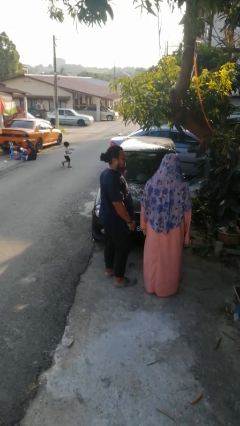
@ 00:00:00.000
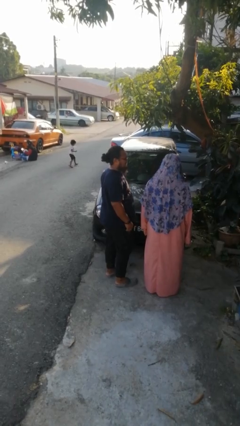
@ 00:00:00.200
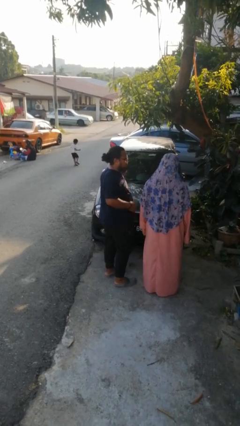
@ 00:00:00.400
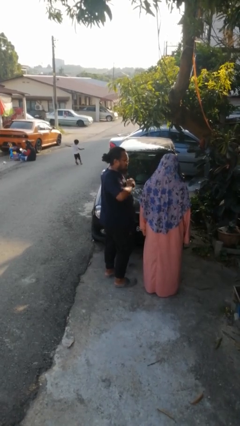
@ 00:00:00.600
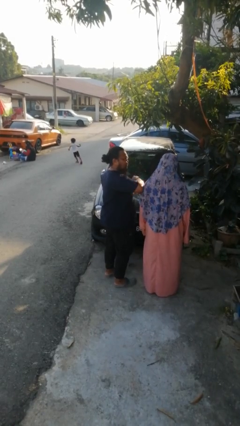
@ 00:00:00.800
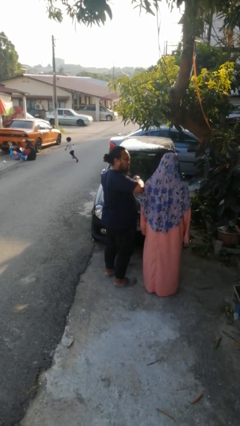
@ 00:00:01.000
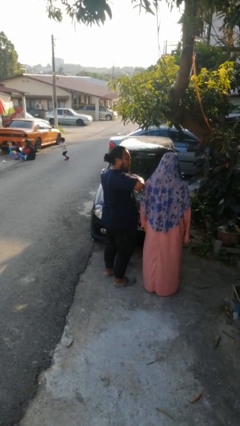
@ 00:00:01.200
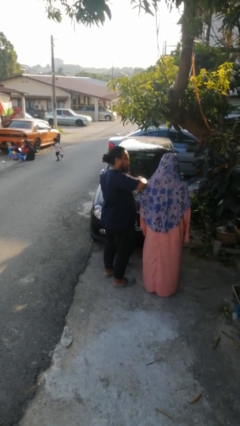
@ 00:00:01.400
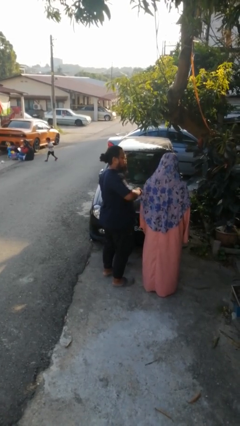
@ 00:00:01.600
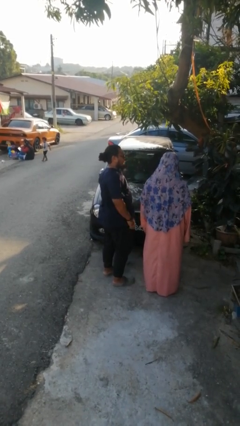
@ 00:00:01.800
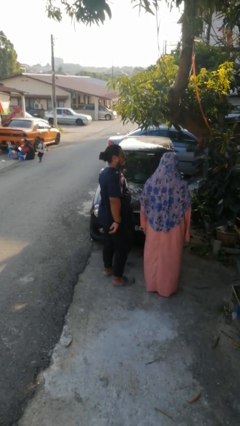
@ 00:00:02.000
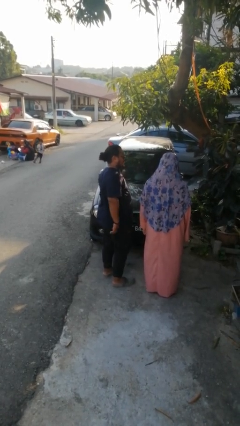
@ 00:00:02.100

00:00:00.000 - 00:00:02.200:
person nudges person with elbow

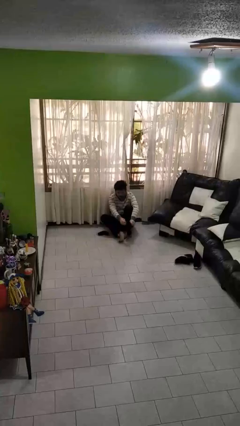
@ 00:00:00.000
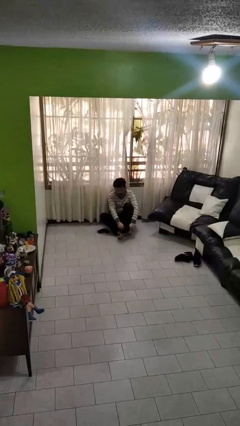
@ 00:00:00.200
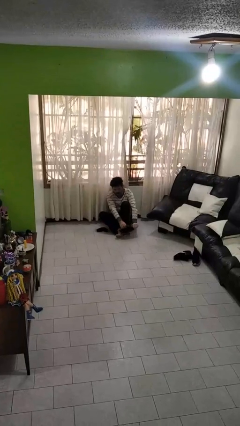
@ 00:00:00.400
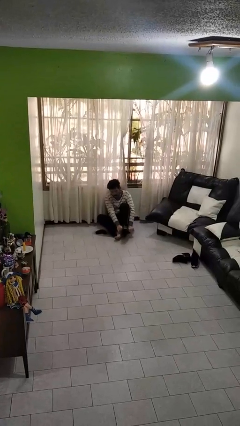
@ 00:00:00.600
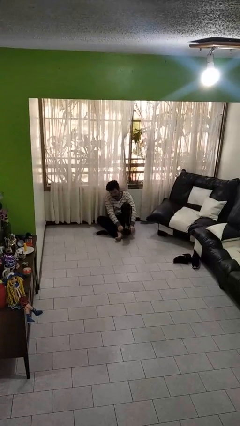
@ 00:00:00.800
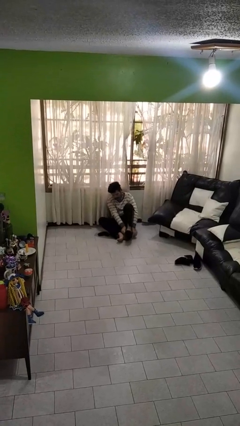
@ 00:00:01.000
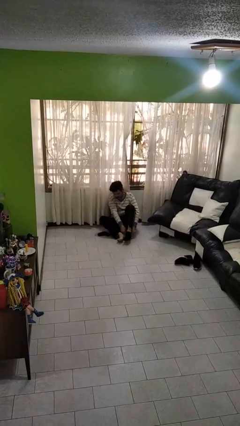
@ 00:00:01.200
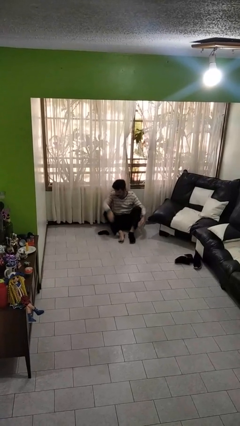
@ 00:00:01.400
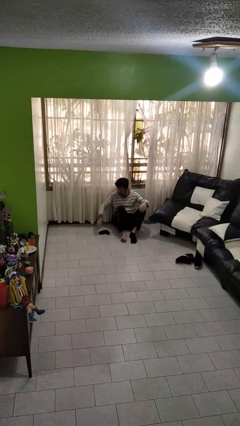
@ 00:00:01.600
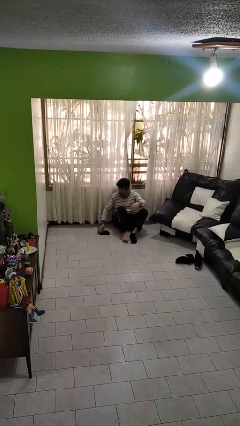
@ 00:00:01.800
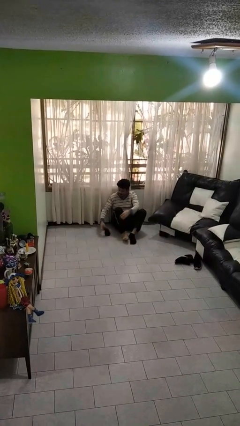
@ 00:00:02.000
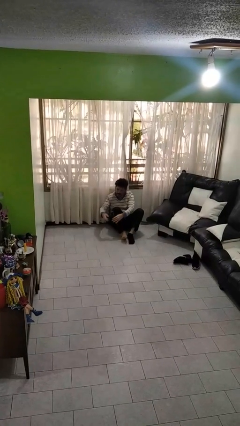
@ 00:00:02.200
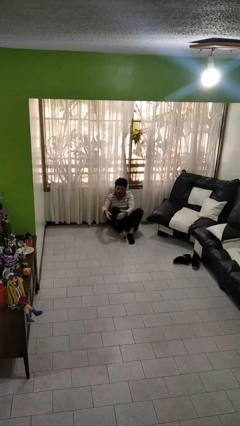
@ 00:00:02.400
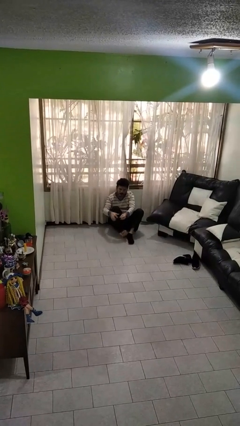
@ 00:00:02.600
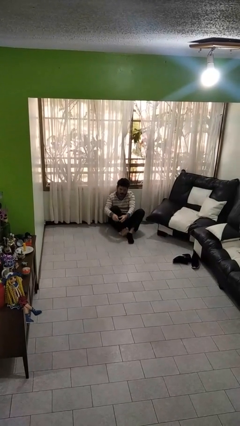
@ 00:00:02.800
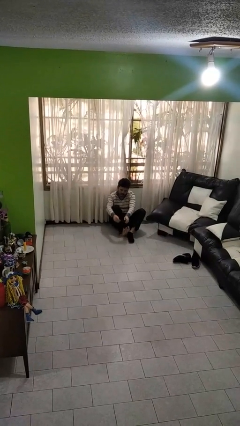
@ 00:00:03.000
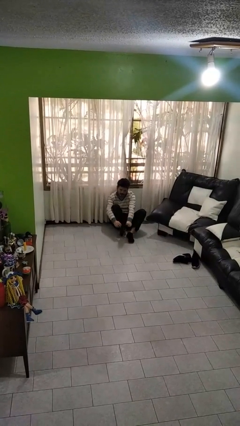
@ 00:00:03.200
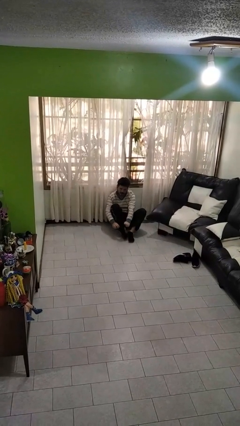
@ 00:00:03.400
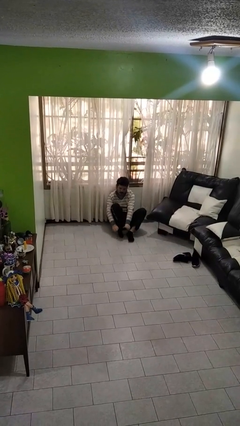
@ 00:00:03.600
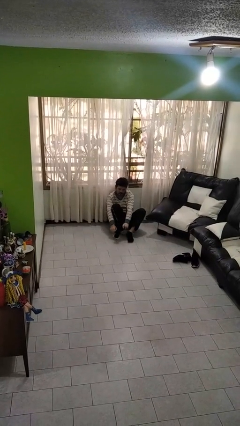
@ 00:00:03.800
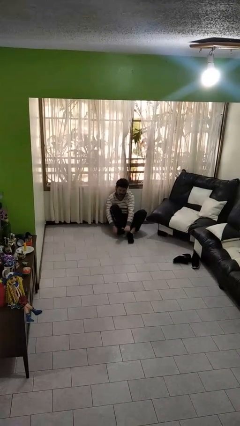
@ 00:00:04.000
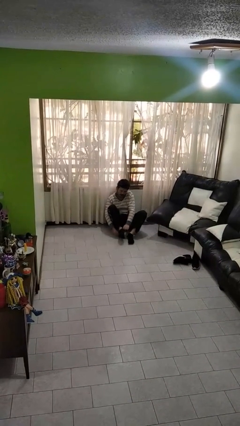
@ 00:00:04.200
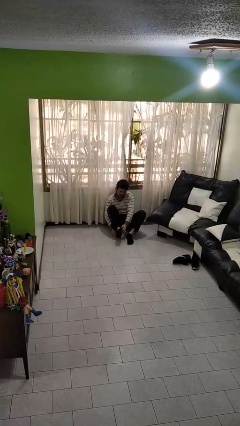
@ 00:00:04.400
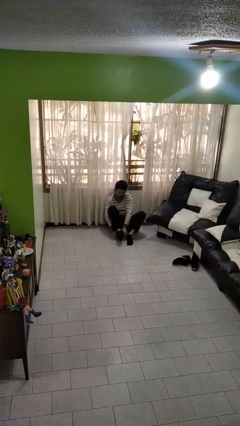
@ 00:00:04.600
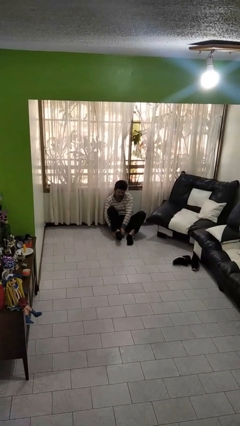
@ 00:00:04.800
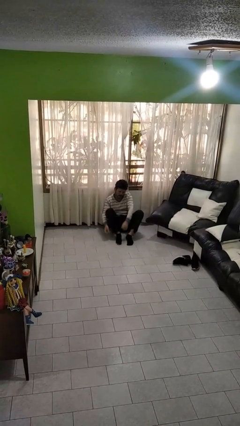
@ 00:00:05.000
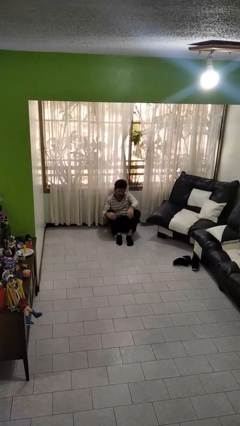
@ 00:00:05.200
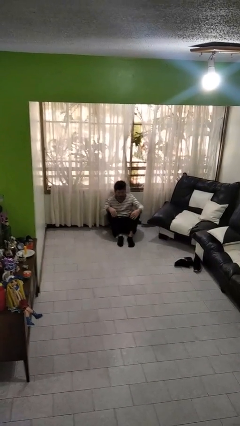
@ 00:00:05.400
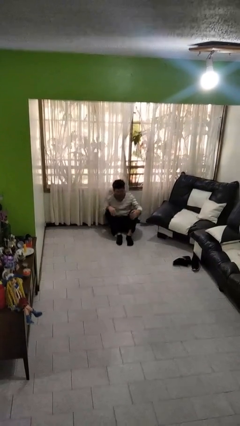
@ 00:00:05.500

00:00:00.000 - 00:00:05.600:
person puts on socks

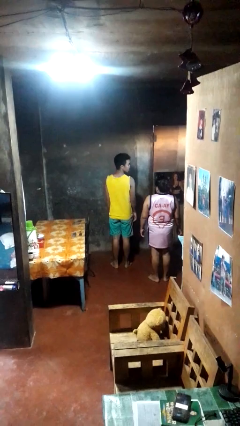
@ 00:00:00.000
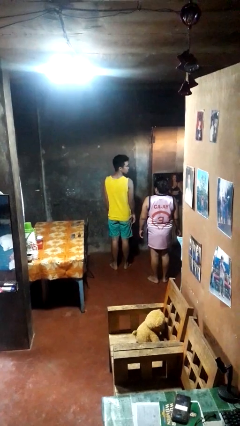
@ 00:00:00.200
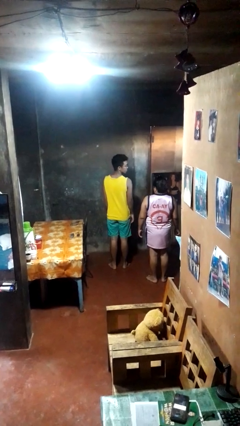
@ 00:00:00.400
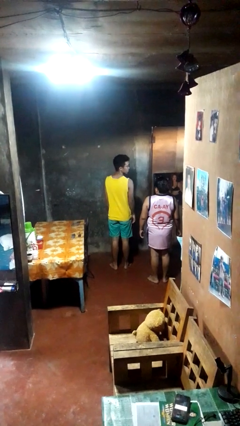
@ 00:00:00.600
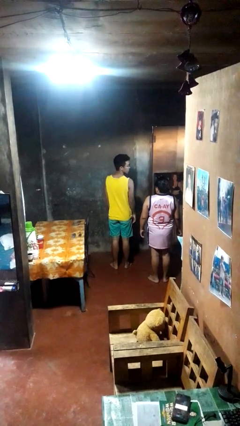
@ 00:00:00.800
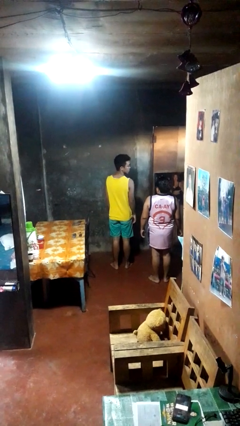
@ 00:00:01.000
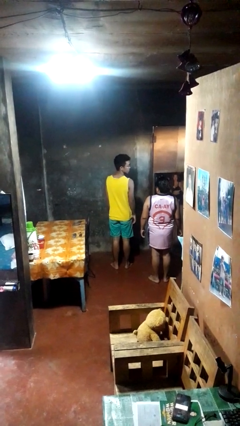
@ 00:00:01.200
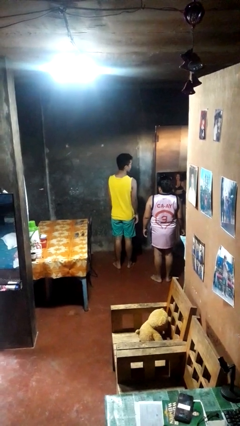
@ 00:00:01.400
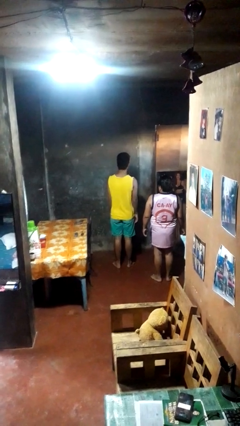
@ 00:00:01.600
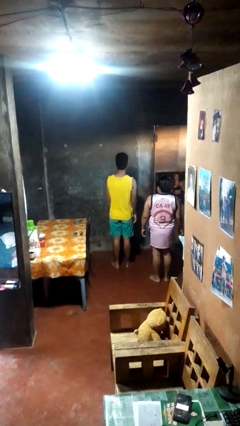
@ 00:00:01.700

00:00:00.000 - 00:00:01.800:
person looks over shoulder

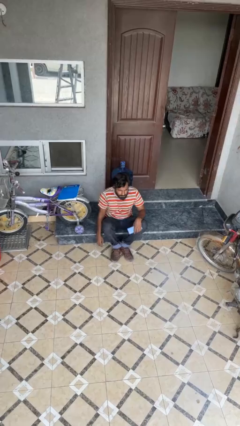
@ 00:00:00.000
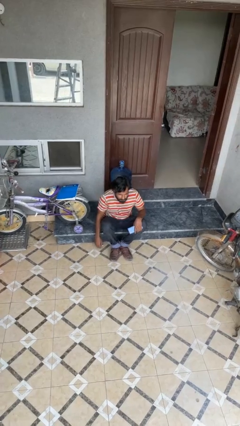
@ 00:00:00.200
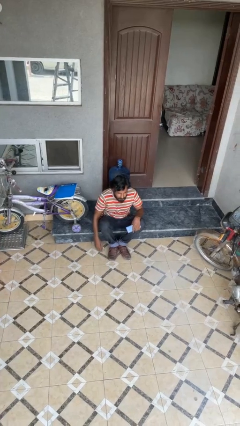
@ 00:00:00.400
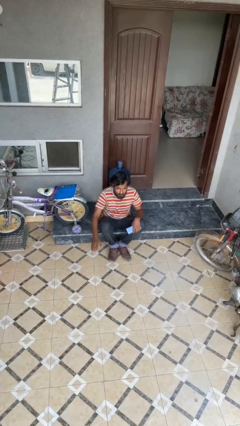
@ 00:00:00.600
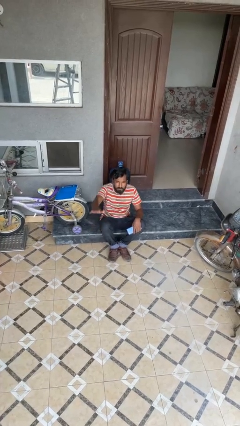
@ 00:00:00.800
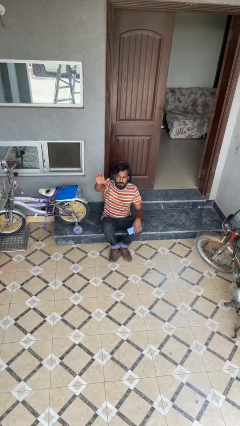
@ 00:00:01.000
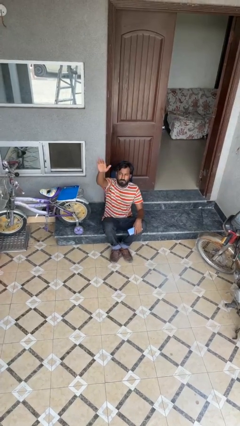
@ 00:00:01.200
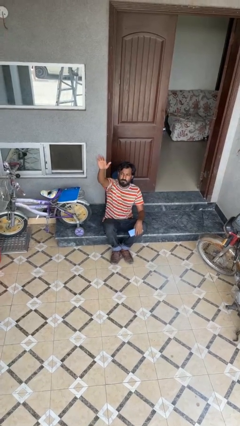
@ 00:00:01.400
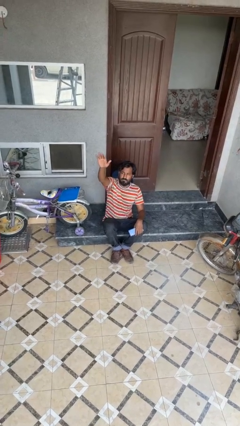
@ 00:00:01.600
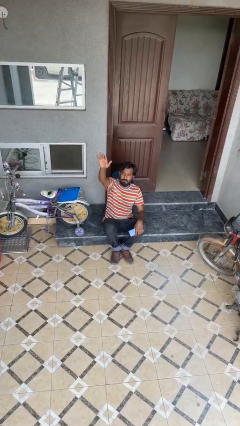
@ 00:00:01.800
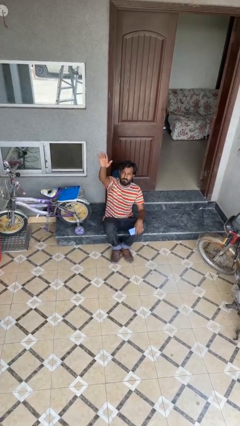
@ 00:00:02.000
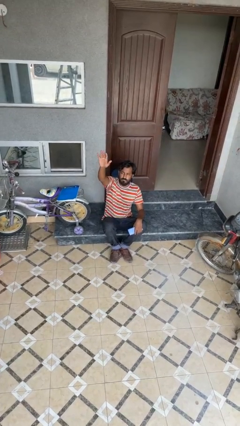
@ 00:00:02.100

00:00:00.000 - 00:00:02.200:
person gestures raise hand

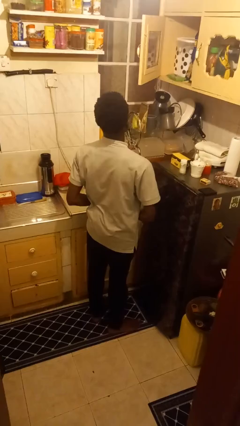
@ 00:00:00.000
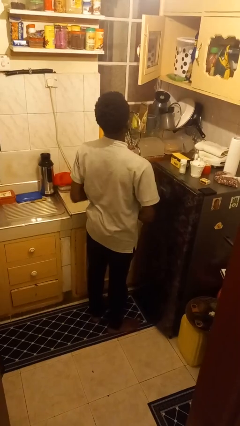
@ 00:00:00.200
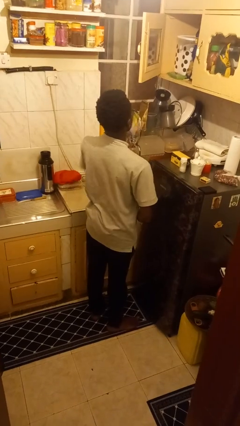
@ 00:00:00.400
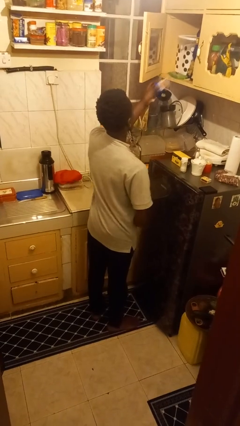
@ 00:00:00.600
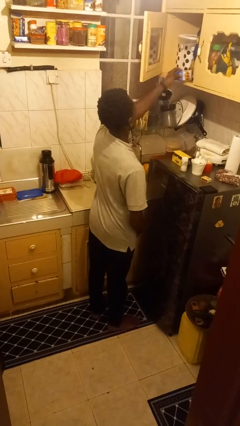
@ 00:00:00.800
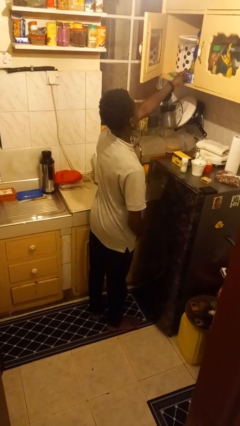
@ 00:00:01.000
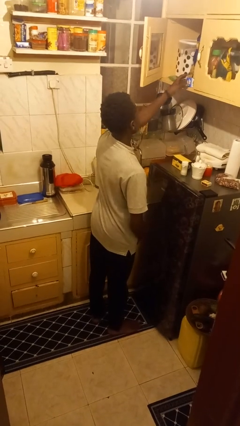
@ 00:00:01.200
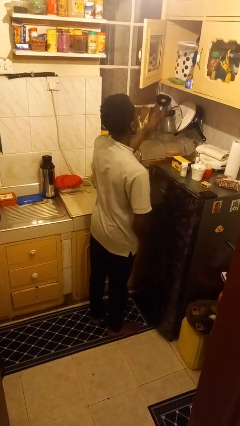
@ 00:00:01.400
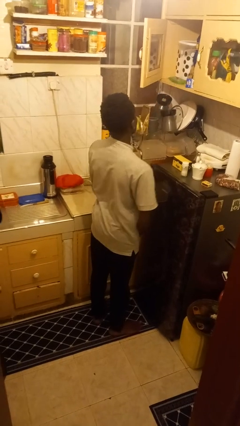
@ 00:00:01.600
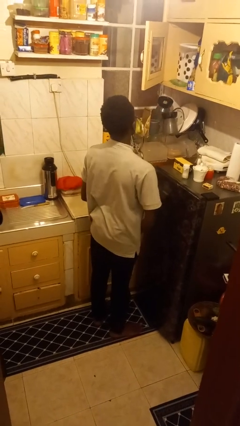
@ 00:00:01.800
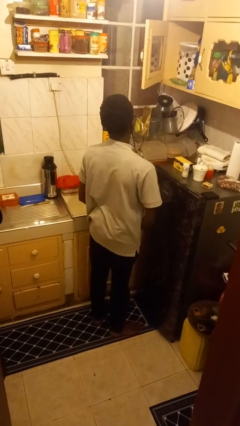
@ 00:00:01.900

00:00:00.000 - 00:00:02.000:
person puts down object into cabinet

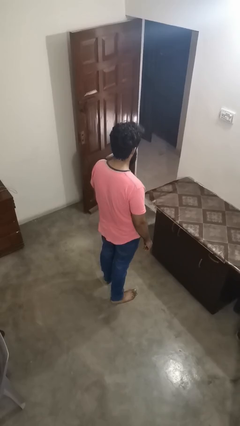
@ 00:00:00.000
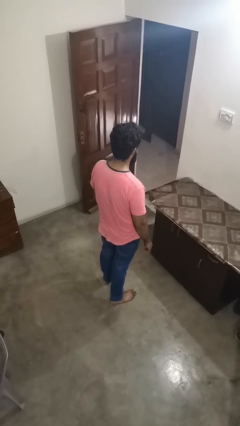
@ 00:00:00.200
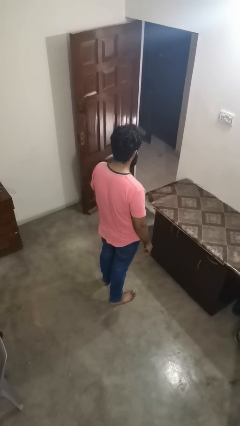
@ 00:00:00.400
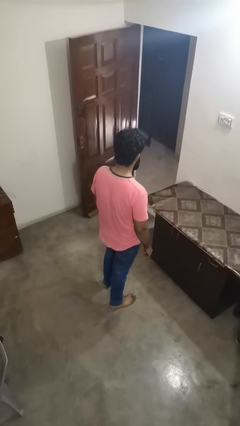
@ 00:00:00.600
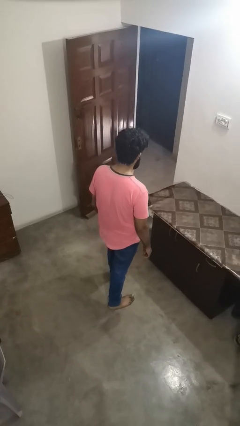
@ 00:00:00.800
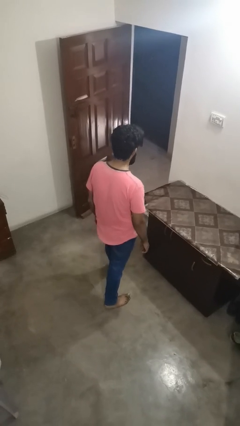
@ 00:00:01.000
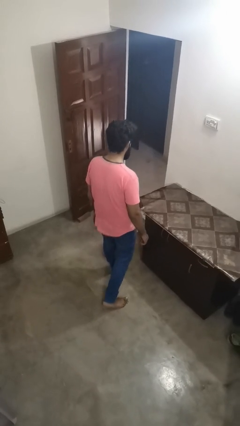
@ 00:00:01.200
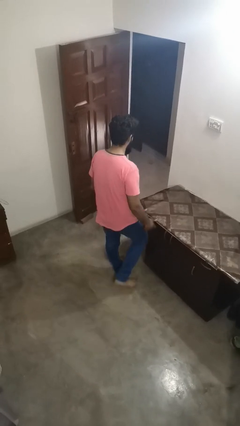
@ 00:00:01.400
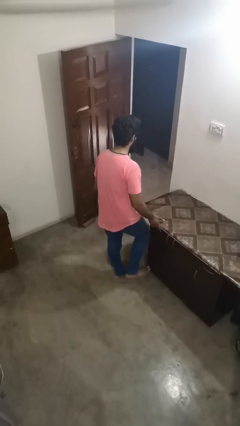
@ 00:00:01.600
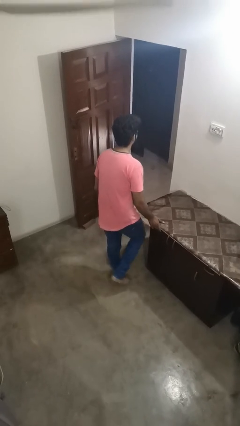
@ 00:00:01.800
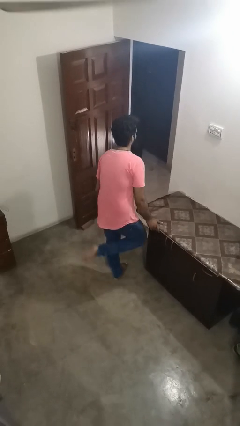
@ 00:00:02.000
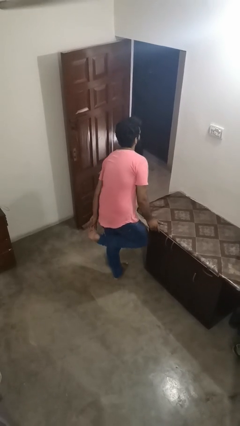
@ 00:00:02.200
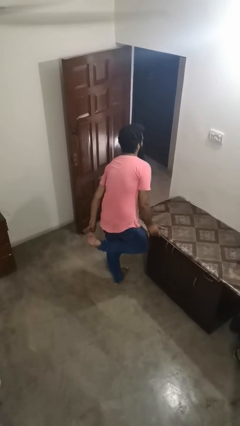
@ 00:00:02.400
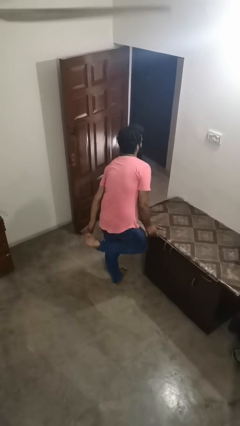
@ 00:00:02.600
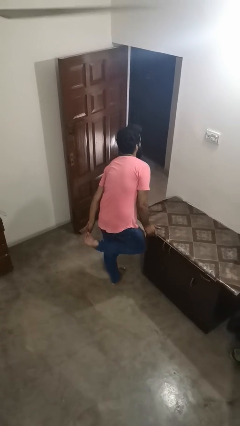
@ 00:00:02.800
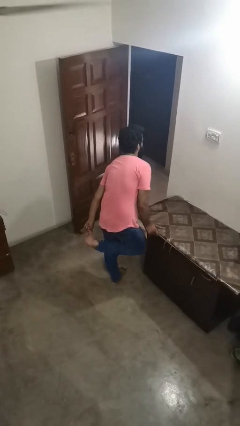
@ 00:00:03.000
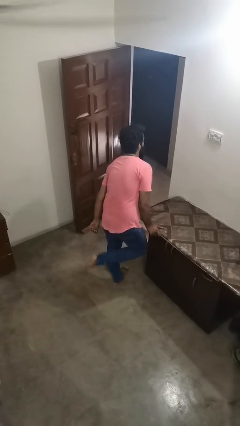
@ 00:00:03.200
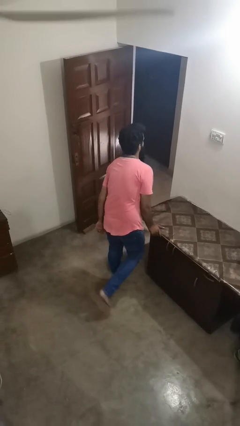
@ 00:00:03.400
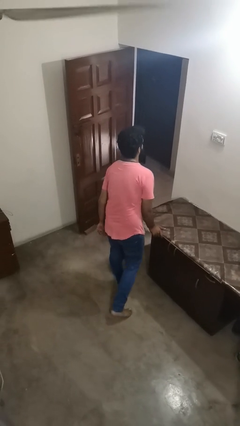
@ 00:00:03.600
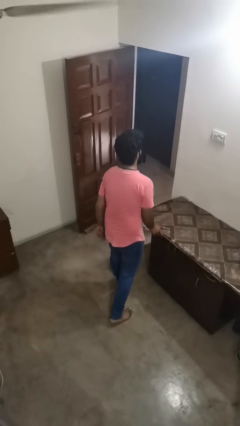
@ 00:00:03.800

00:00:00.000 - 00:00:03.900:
person bumps into table
